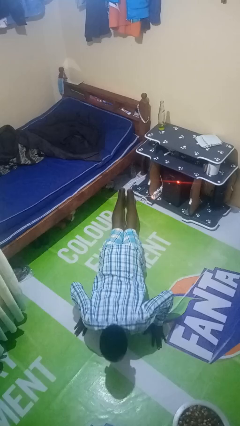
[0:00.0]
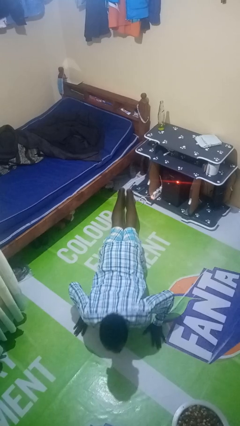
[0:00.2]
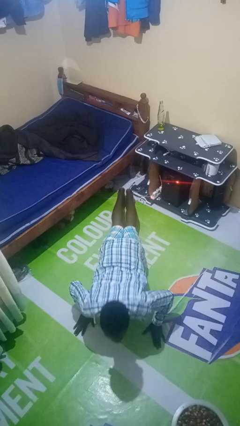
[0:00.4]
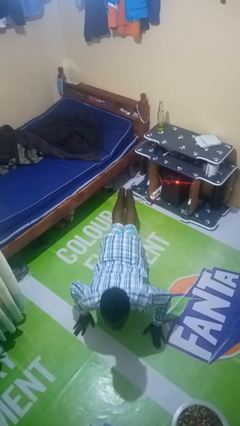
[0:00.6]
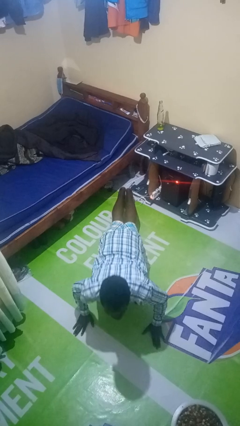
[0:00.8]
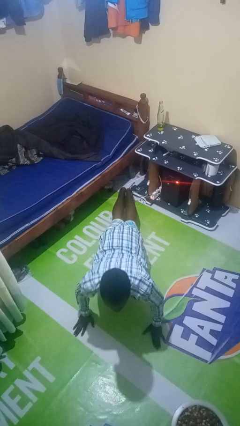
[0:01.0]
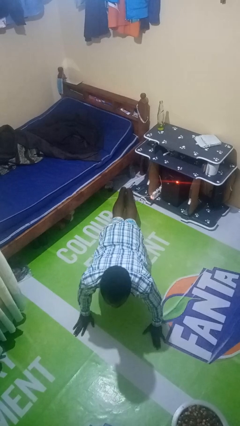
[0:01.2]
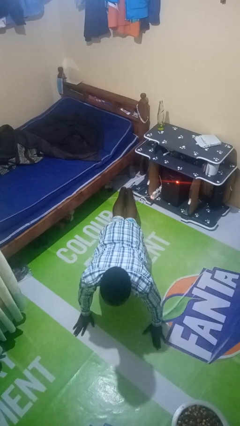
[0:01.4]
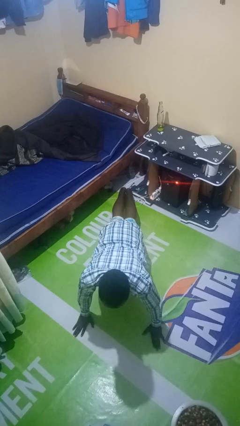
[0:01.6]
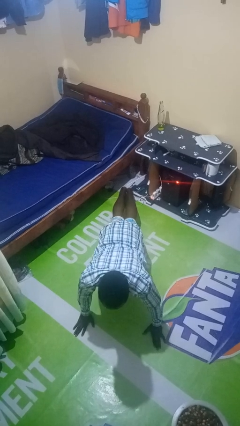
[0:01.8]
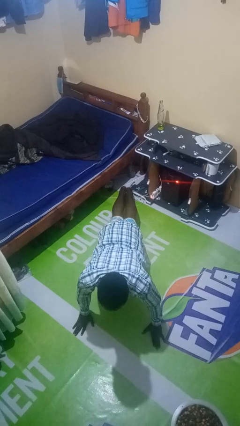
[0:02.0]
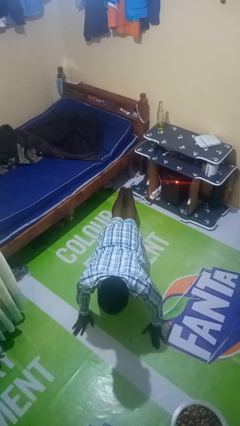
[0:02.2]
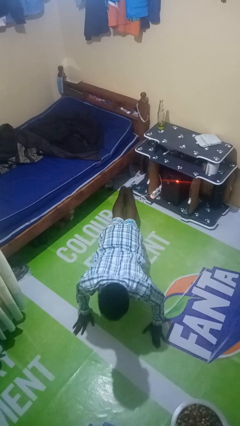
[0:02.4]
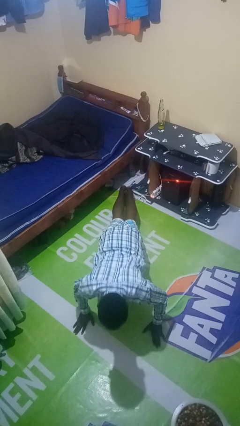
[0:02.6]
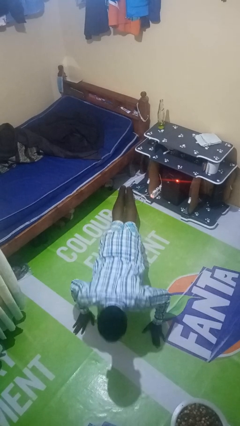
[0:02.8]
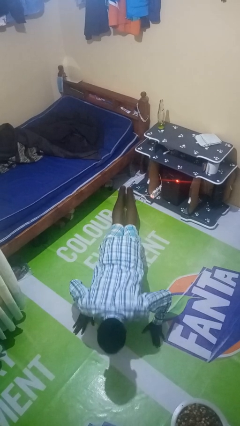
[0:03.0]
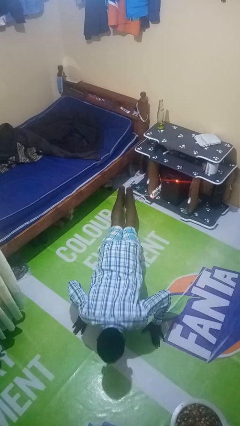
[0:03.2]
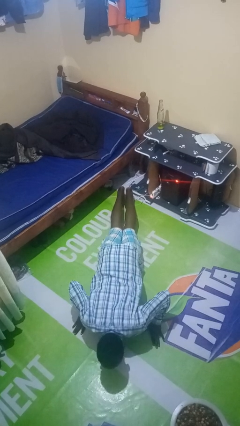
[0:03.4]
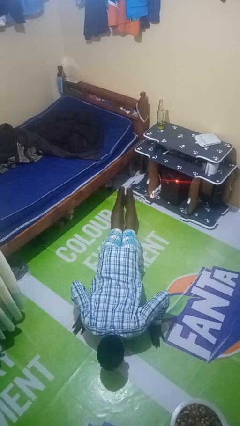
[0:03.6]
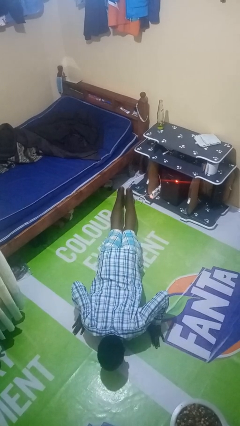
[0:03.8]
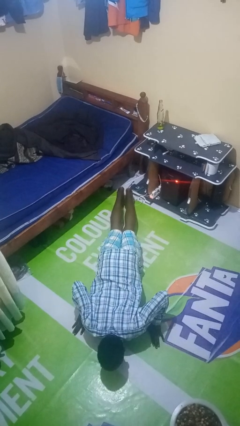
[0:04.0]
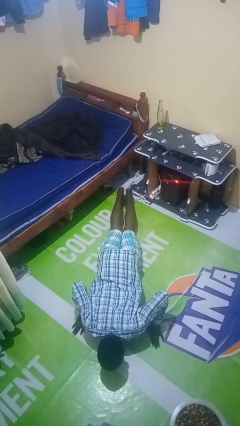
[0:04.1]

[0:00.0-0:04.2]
person exercises with pushup

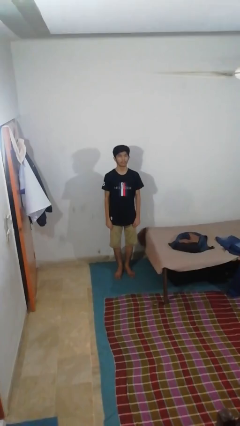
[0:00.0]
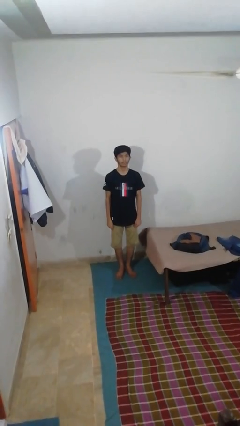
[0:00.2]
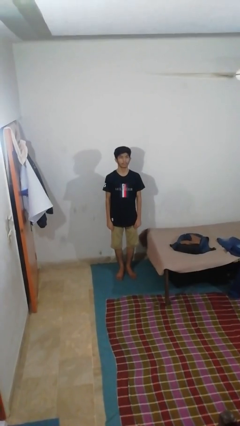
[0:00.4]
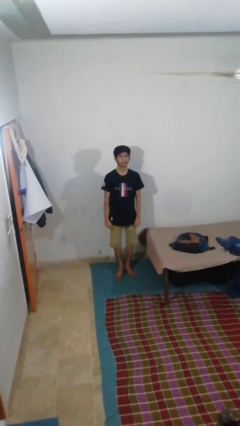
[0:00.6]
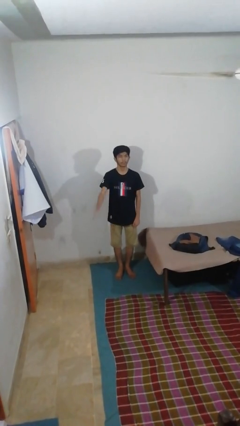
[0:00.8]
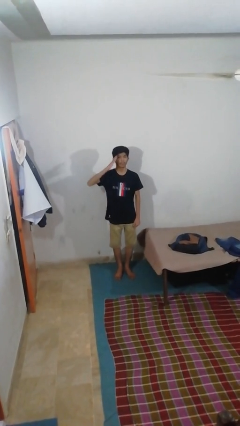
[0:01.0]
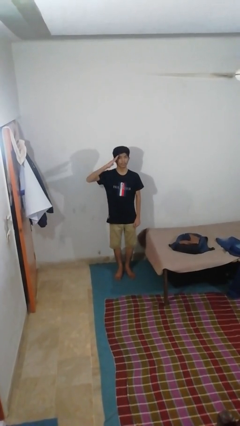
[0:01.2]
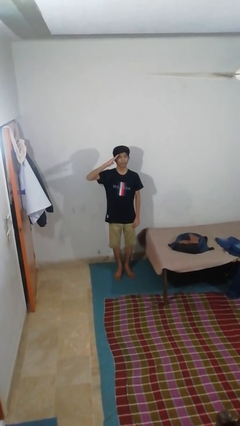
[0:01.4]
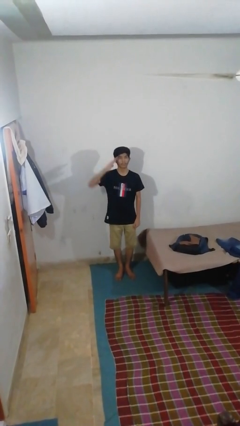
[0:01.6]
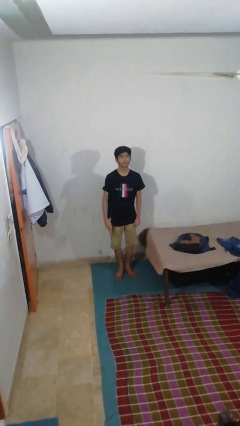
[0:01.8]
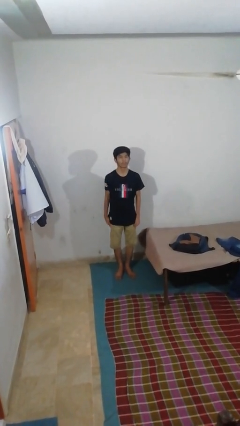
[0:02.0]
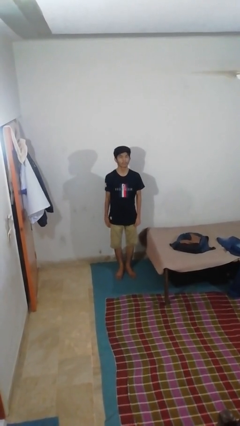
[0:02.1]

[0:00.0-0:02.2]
person salutes

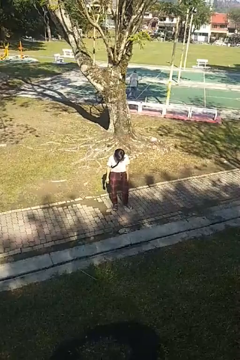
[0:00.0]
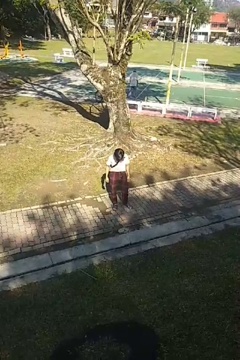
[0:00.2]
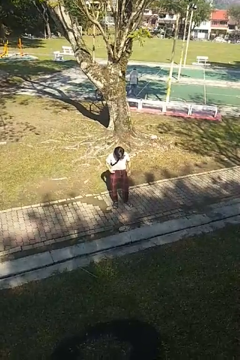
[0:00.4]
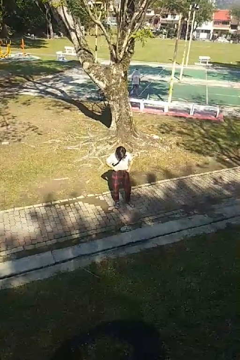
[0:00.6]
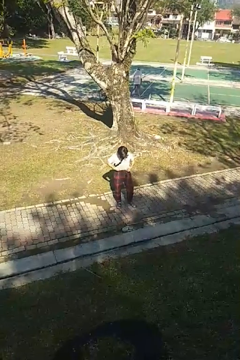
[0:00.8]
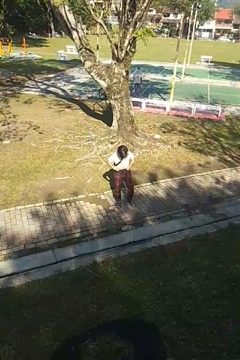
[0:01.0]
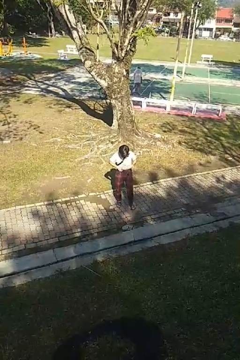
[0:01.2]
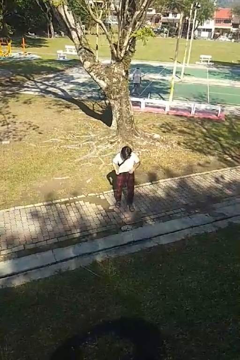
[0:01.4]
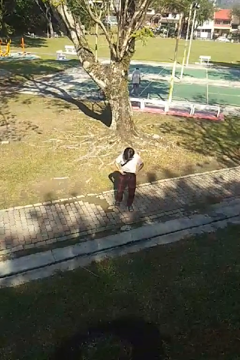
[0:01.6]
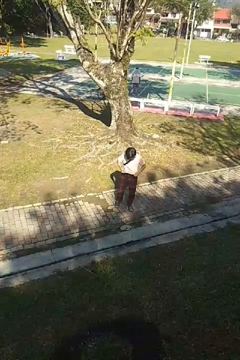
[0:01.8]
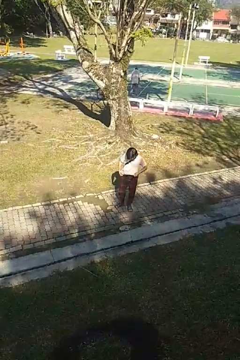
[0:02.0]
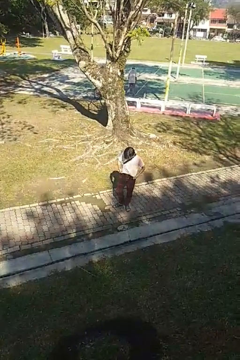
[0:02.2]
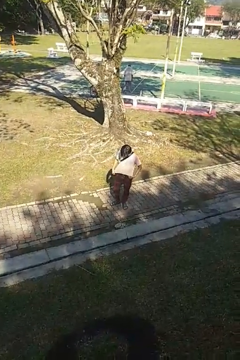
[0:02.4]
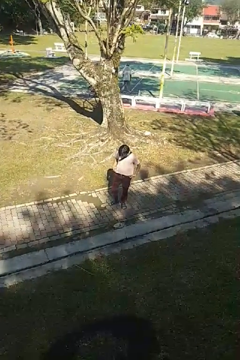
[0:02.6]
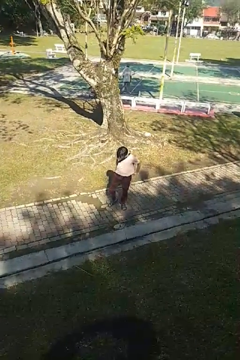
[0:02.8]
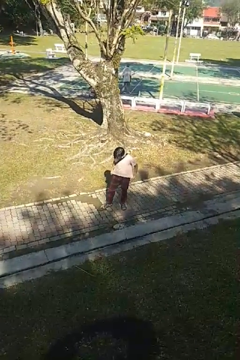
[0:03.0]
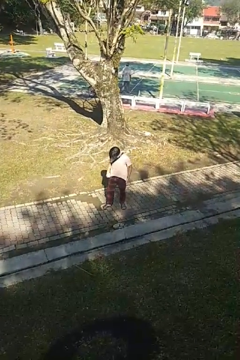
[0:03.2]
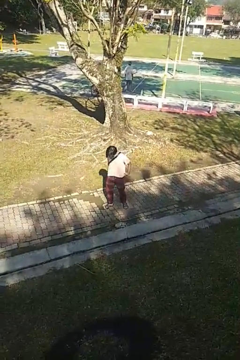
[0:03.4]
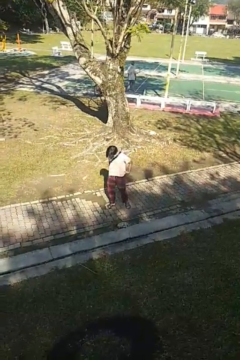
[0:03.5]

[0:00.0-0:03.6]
person untucks shirt

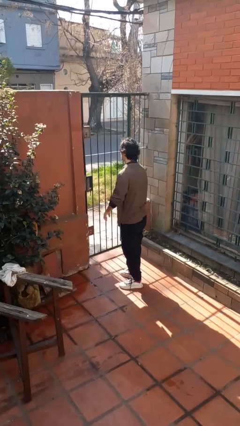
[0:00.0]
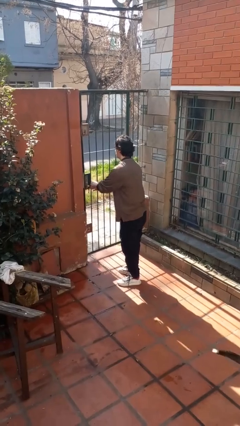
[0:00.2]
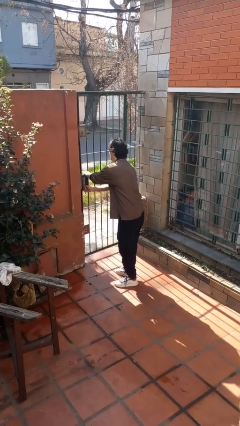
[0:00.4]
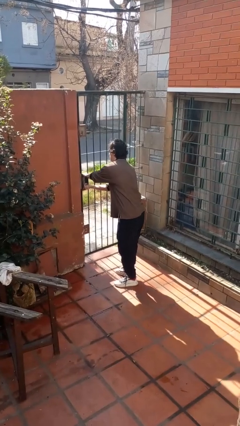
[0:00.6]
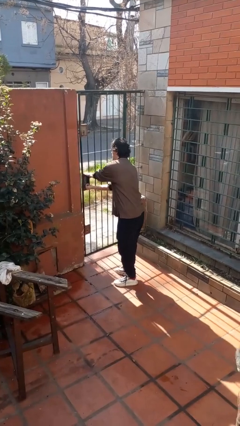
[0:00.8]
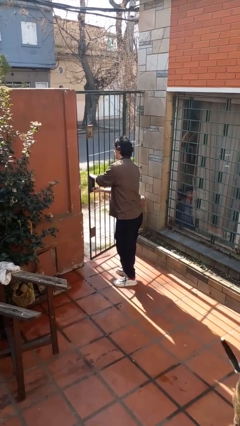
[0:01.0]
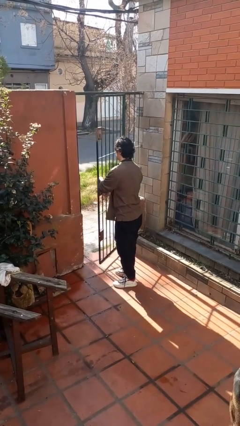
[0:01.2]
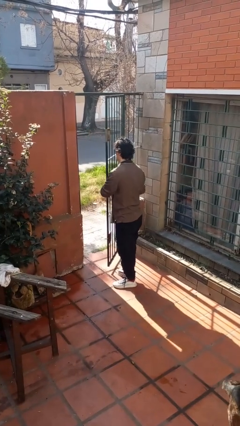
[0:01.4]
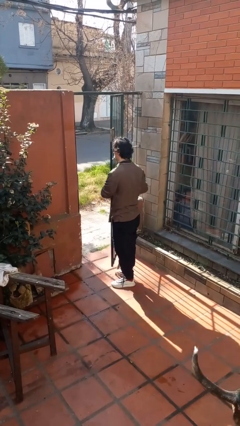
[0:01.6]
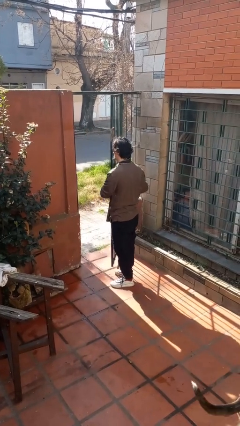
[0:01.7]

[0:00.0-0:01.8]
person opens gate

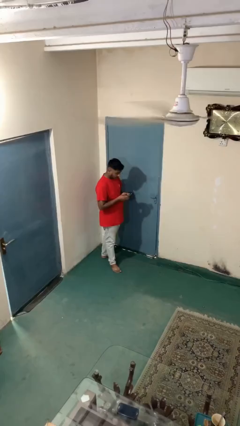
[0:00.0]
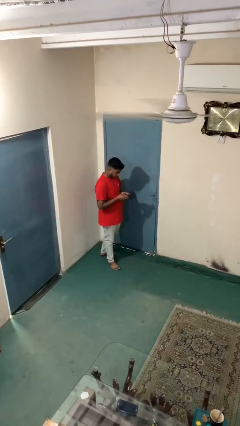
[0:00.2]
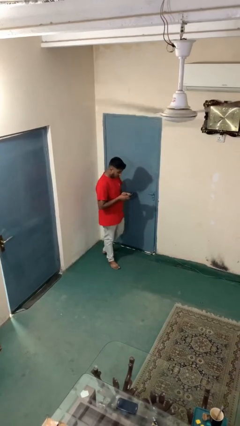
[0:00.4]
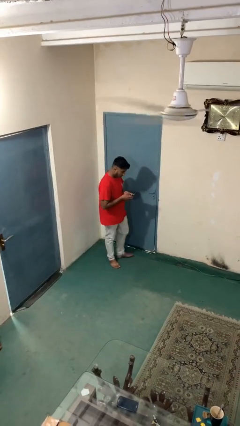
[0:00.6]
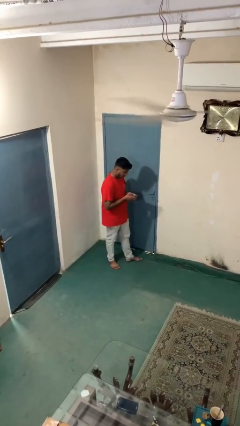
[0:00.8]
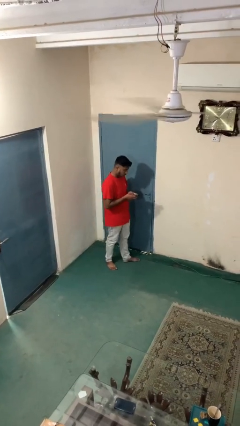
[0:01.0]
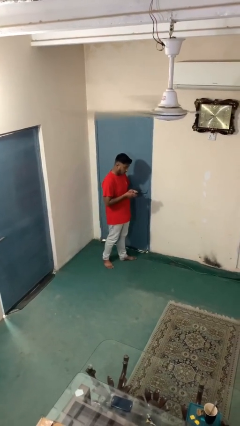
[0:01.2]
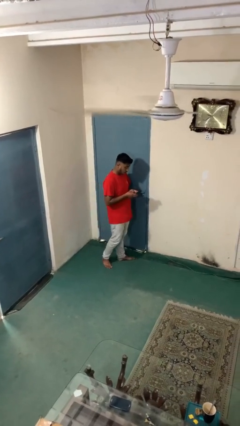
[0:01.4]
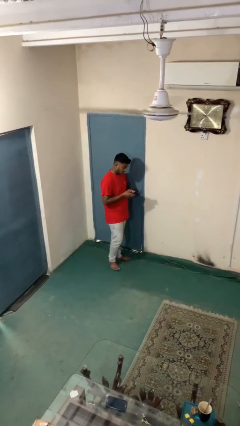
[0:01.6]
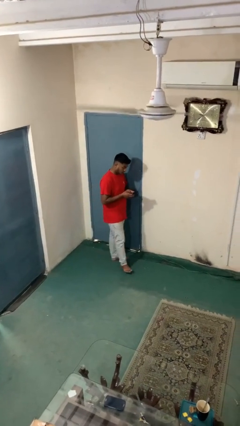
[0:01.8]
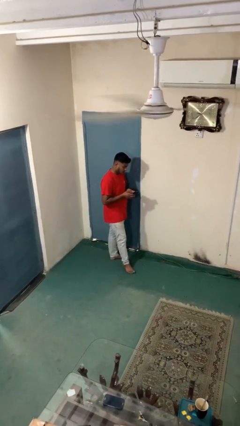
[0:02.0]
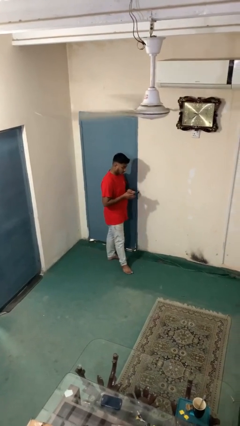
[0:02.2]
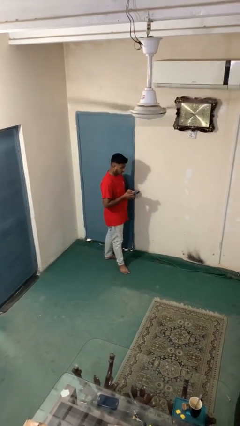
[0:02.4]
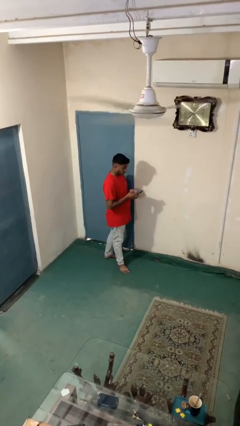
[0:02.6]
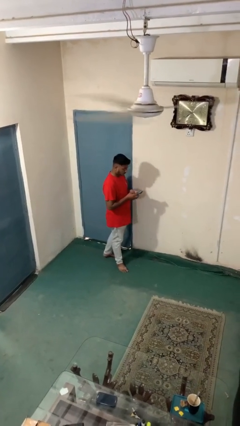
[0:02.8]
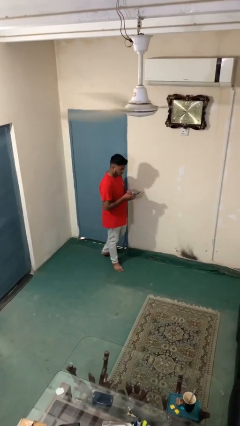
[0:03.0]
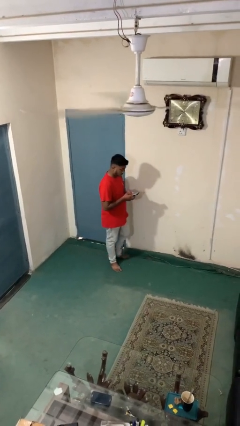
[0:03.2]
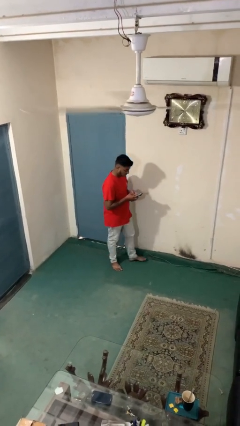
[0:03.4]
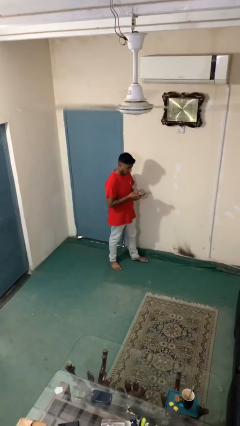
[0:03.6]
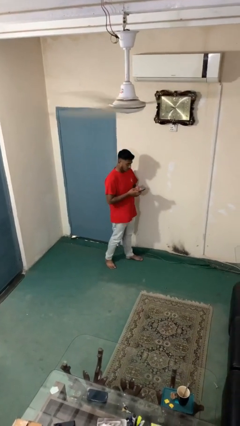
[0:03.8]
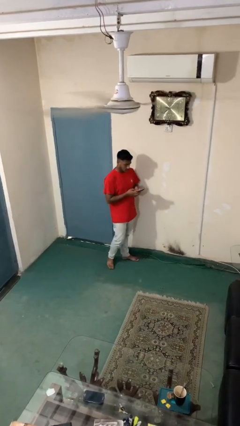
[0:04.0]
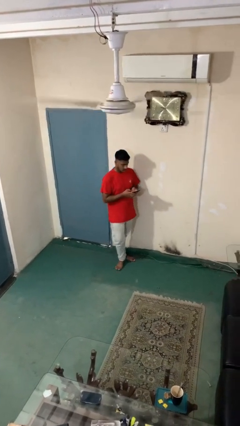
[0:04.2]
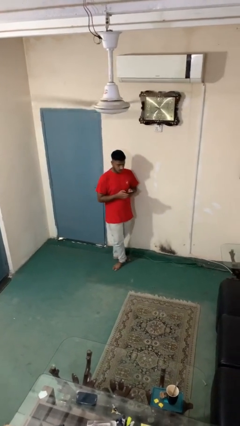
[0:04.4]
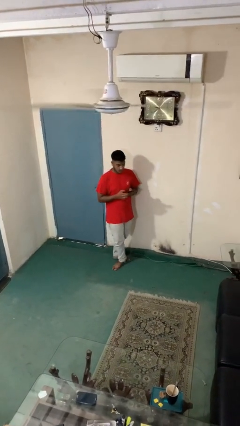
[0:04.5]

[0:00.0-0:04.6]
person texts on phone

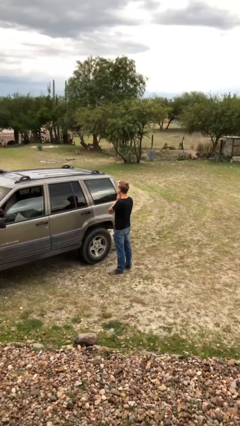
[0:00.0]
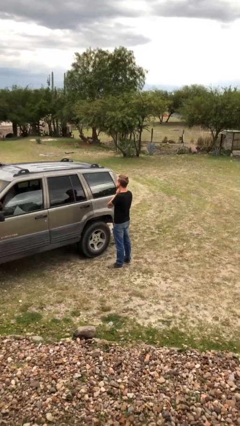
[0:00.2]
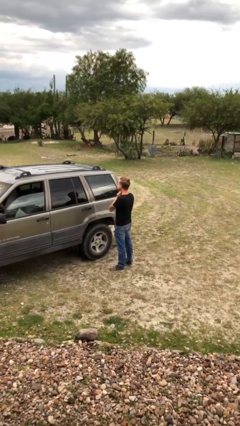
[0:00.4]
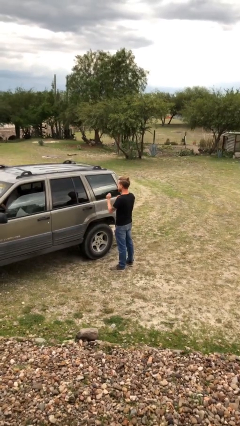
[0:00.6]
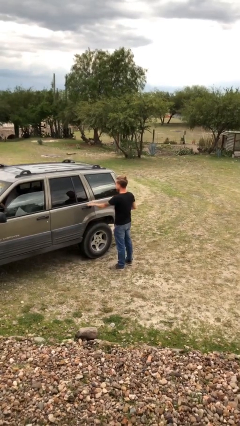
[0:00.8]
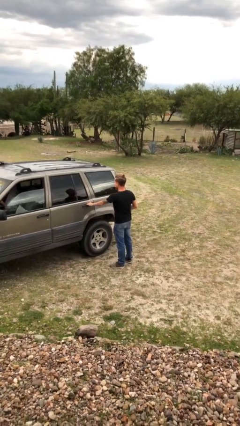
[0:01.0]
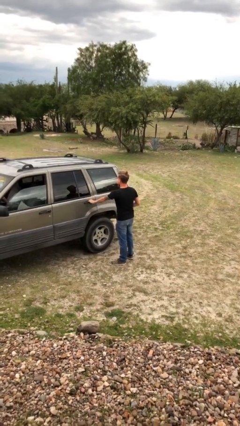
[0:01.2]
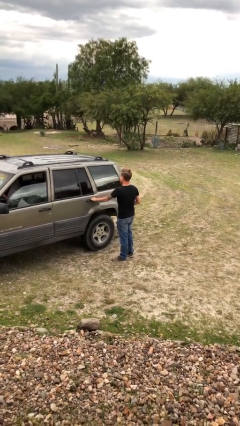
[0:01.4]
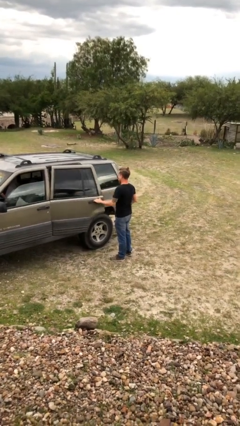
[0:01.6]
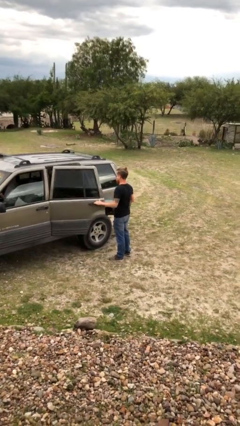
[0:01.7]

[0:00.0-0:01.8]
person opens car door
